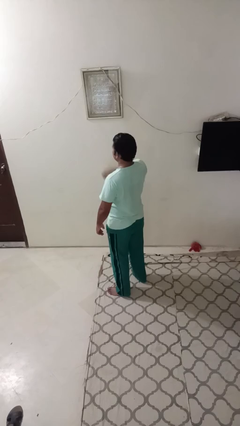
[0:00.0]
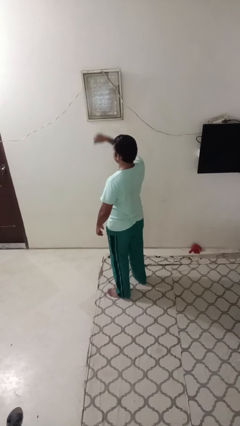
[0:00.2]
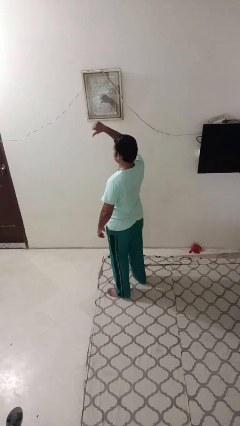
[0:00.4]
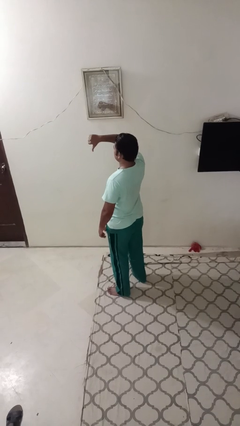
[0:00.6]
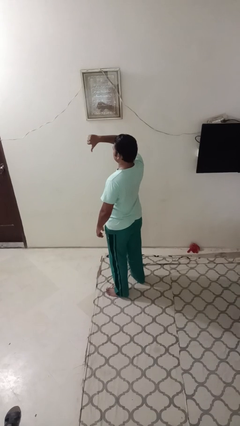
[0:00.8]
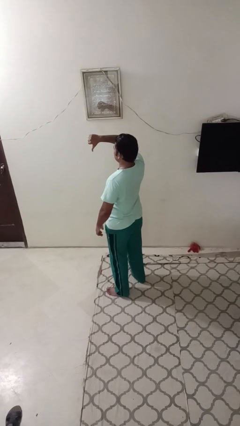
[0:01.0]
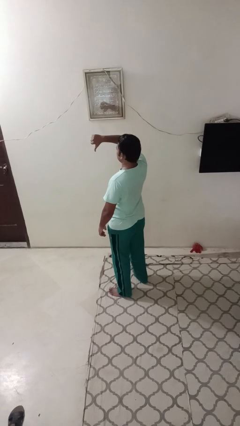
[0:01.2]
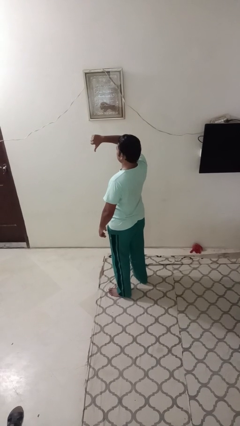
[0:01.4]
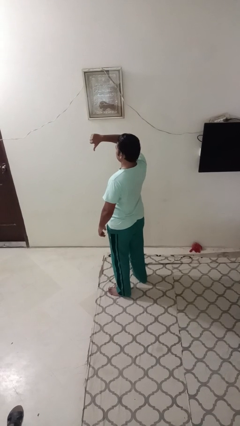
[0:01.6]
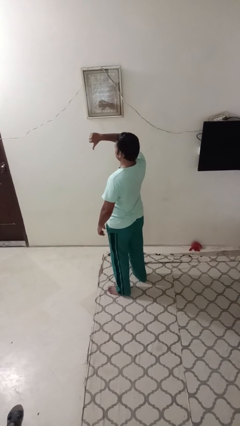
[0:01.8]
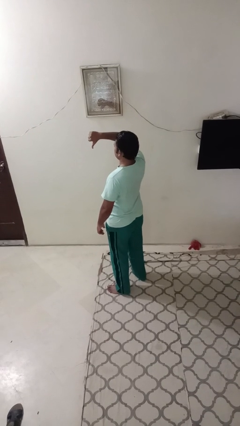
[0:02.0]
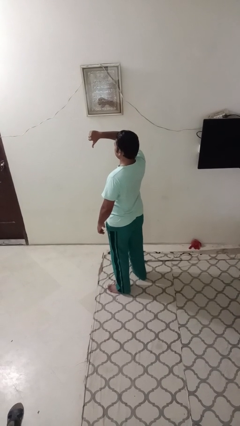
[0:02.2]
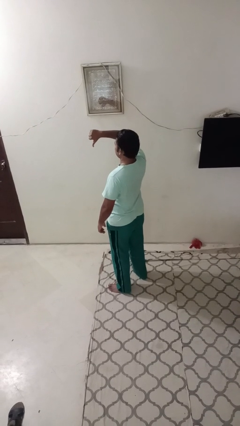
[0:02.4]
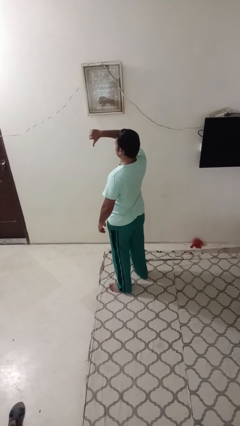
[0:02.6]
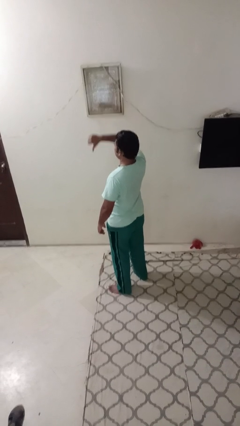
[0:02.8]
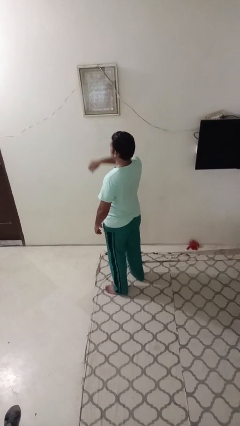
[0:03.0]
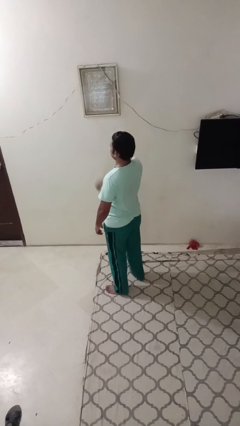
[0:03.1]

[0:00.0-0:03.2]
person gestures thumbs down

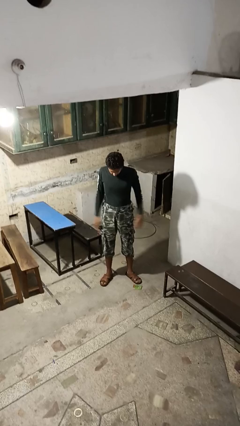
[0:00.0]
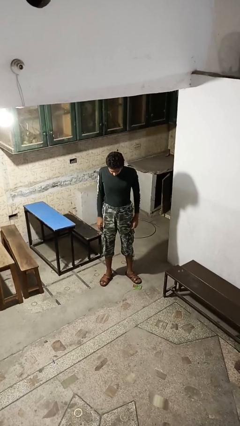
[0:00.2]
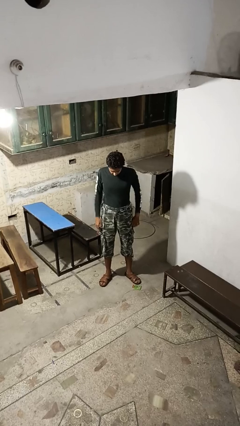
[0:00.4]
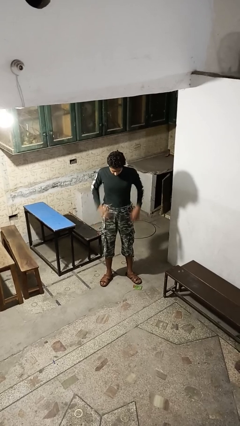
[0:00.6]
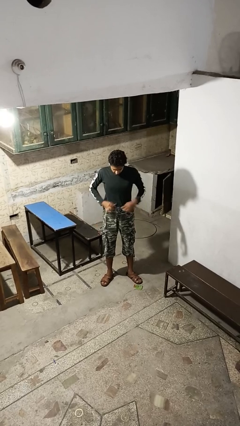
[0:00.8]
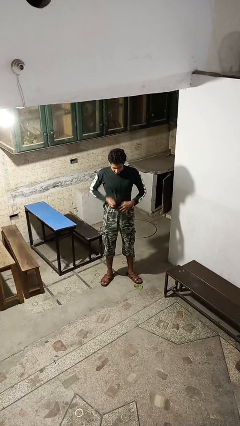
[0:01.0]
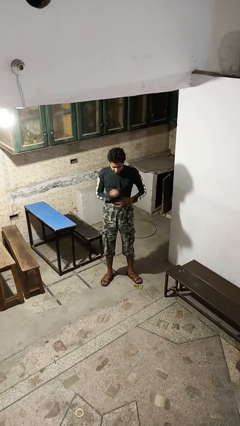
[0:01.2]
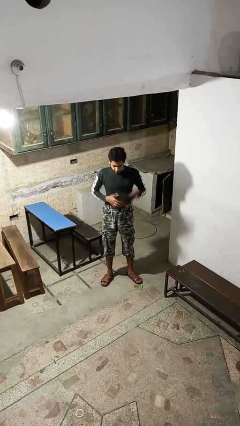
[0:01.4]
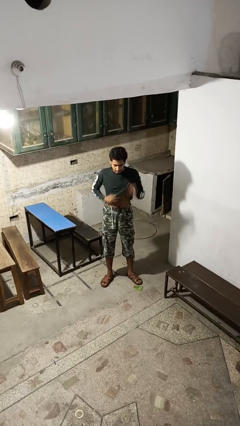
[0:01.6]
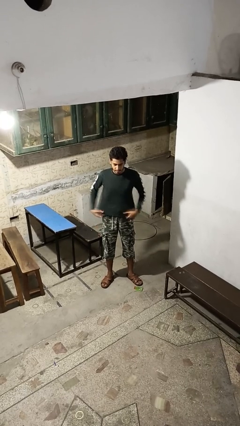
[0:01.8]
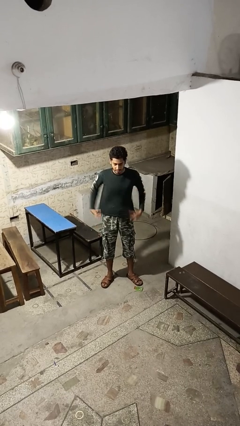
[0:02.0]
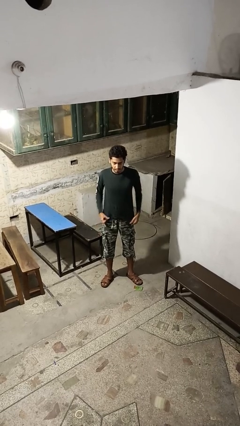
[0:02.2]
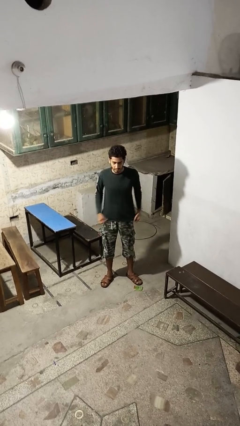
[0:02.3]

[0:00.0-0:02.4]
person untucks shirt

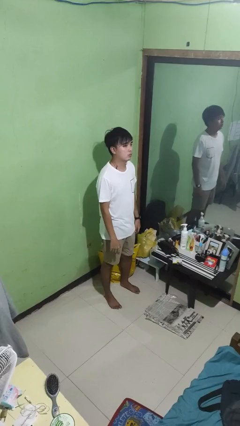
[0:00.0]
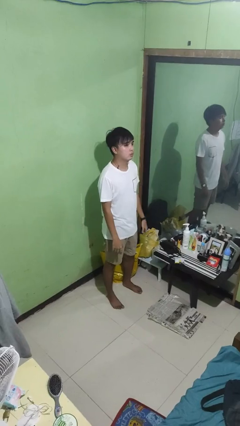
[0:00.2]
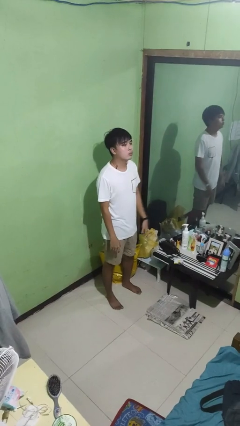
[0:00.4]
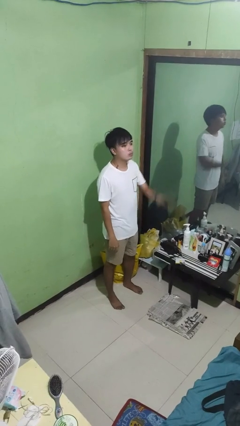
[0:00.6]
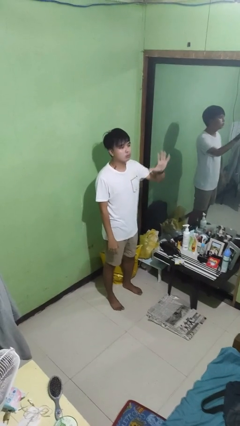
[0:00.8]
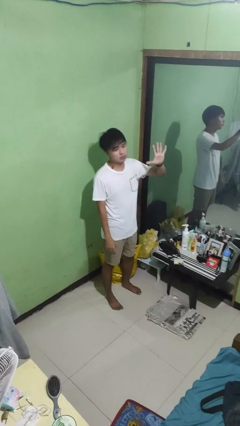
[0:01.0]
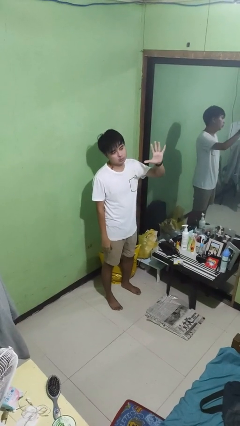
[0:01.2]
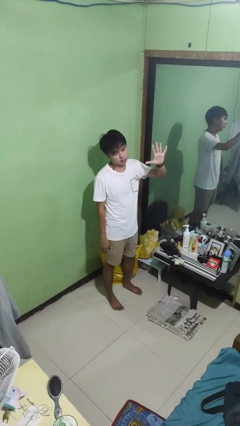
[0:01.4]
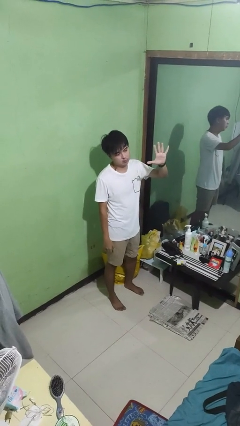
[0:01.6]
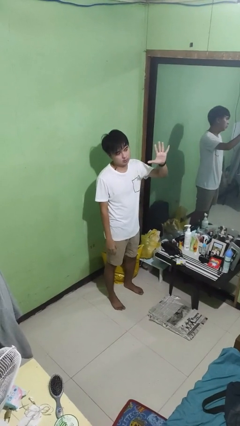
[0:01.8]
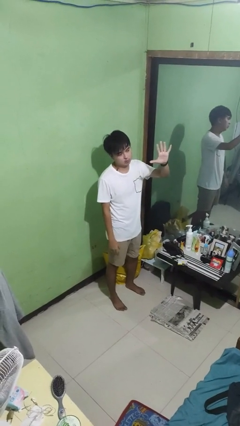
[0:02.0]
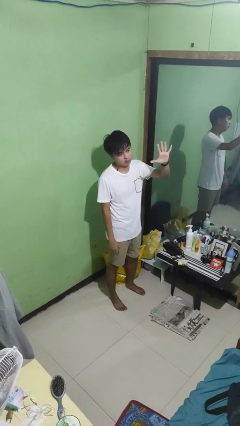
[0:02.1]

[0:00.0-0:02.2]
person gestures number five

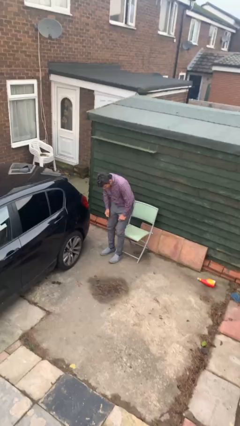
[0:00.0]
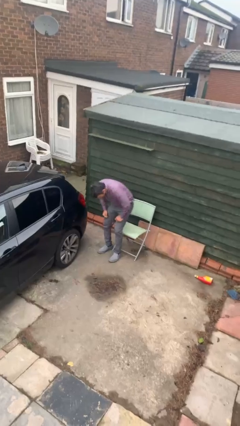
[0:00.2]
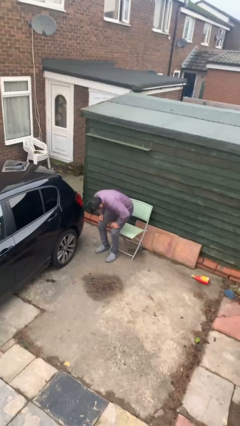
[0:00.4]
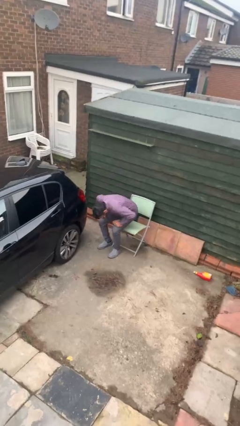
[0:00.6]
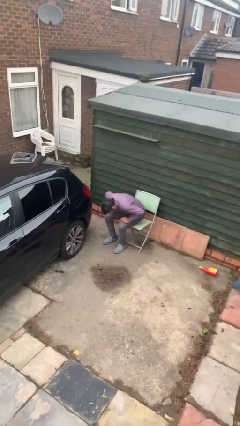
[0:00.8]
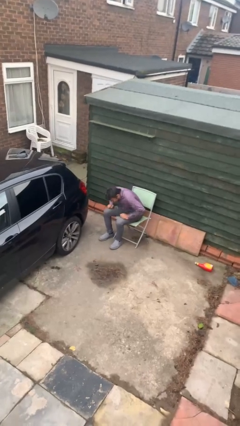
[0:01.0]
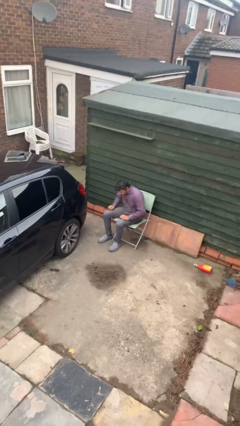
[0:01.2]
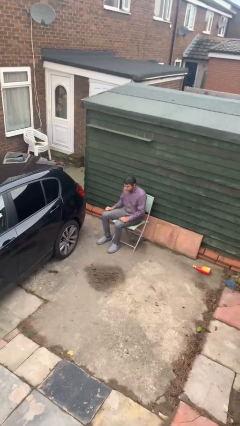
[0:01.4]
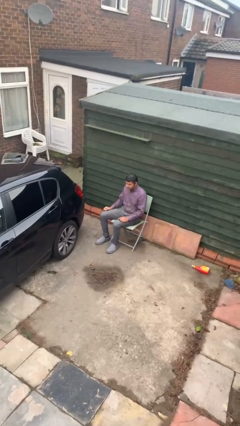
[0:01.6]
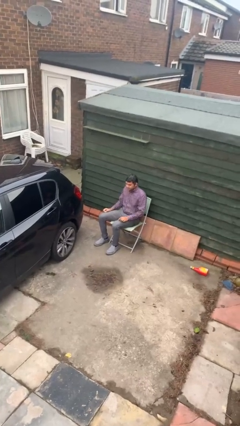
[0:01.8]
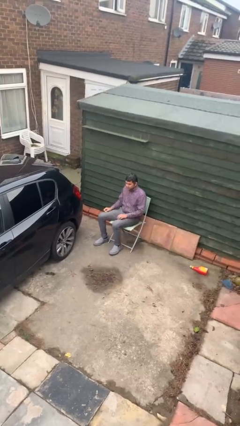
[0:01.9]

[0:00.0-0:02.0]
person sits down

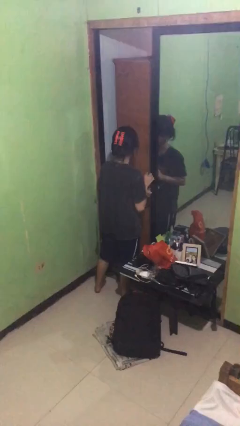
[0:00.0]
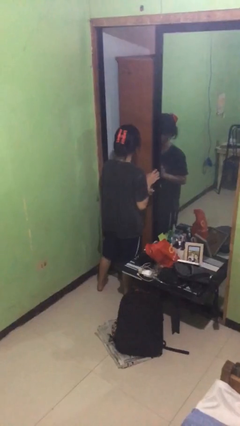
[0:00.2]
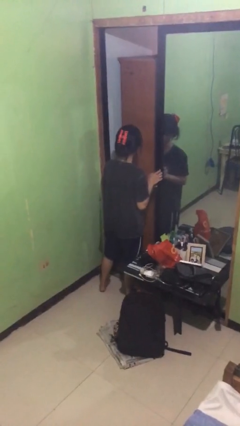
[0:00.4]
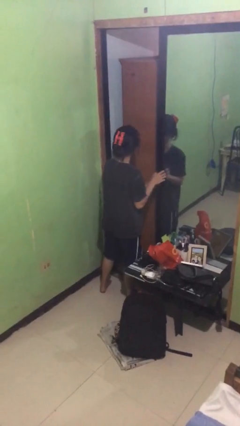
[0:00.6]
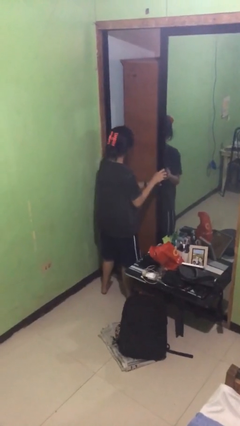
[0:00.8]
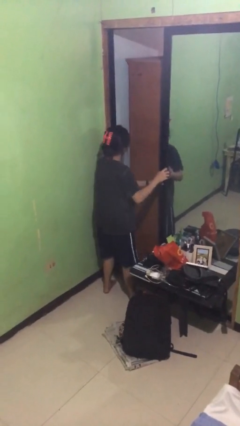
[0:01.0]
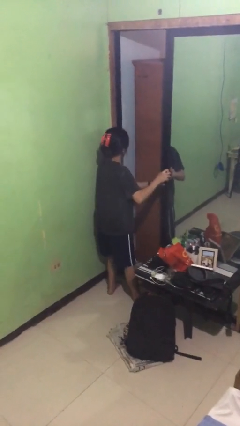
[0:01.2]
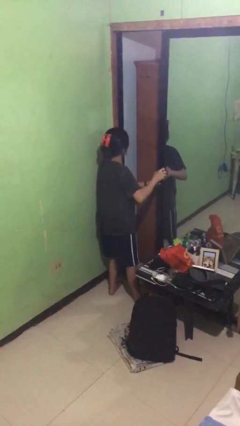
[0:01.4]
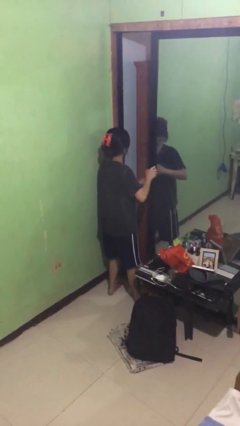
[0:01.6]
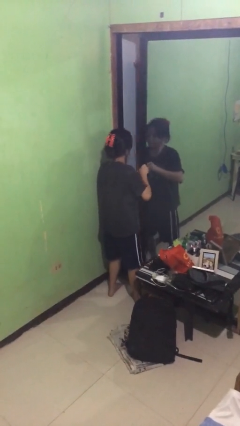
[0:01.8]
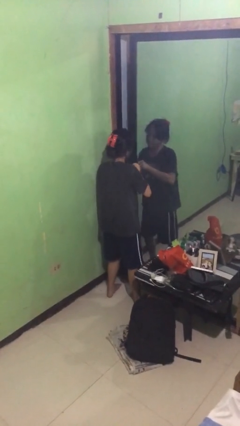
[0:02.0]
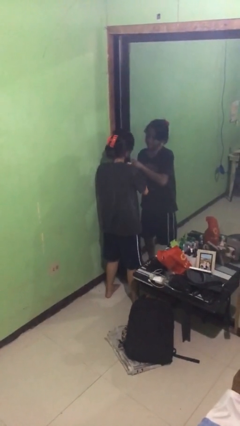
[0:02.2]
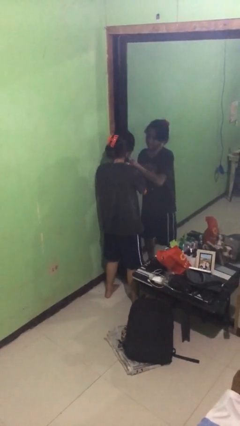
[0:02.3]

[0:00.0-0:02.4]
person closes sliding door

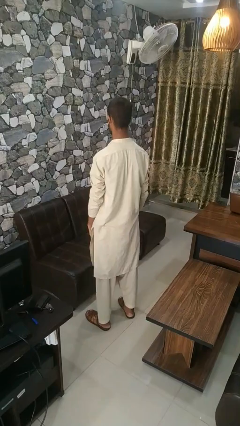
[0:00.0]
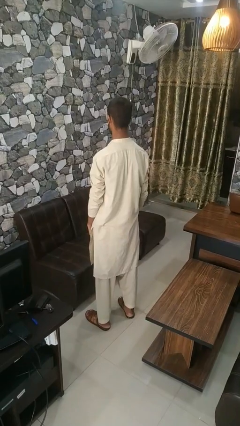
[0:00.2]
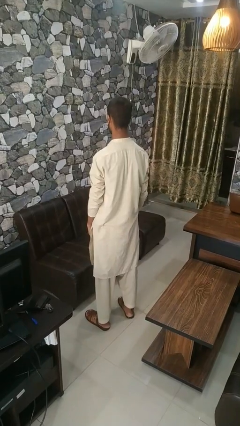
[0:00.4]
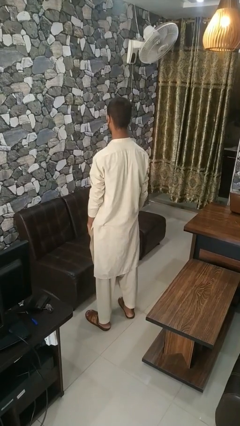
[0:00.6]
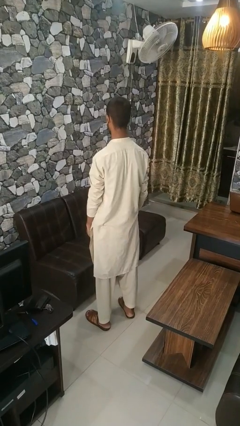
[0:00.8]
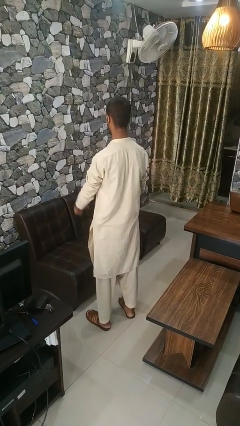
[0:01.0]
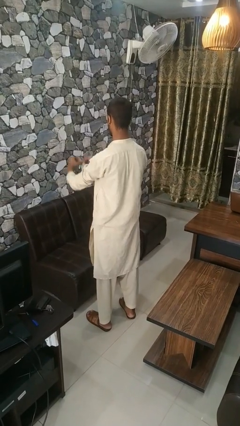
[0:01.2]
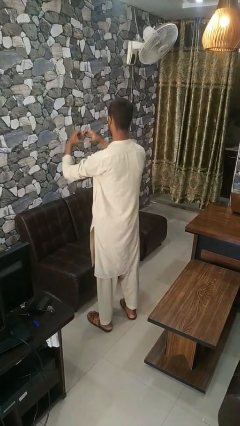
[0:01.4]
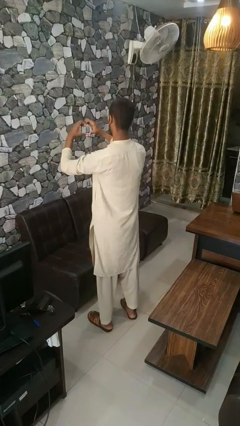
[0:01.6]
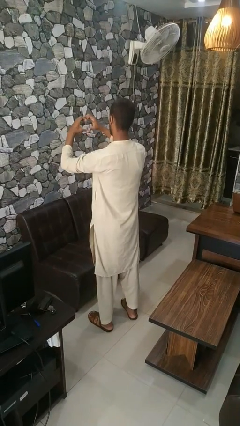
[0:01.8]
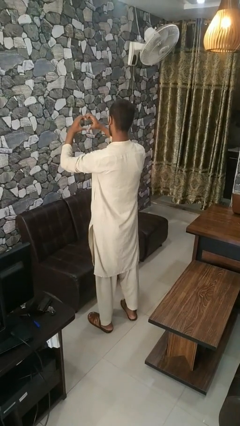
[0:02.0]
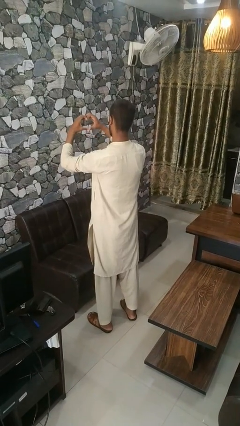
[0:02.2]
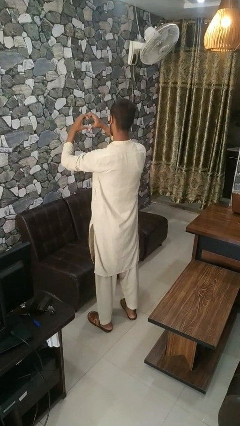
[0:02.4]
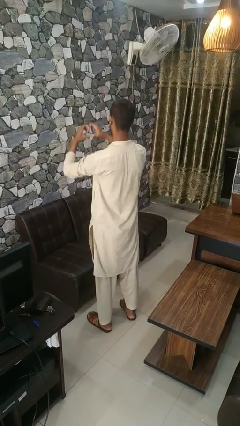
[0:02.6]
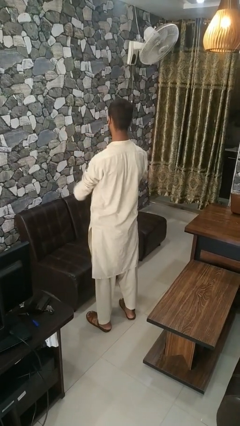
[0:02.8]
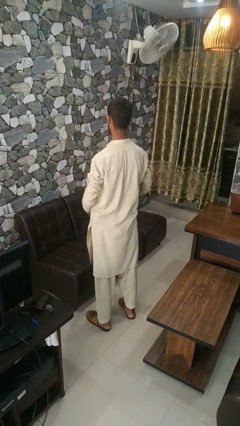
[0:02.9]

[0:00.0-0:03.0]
person gestures heart

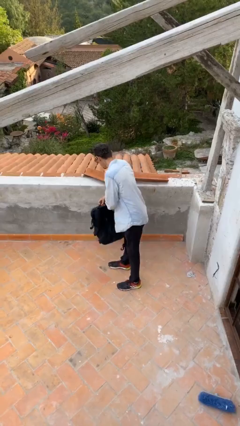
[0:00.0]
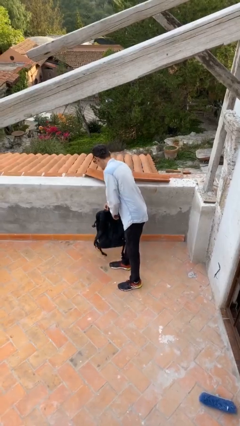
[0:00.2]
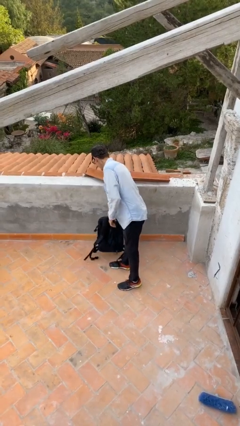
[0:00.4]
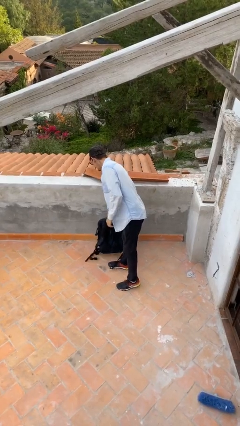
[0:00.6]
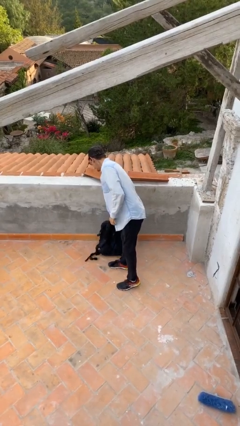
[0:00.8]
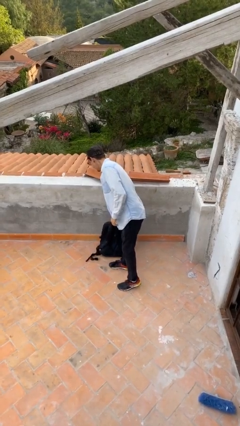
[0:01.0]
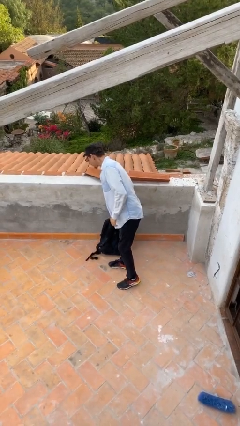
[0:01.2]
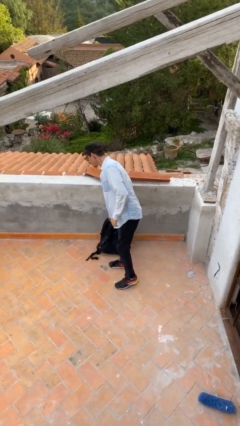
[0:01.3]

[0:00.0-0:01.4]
person puts down object on floor
